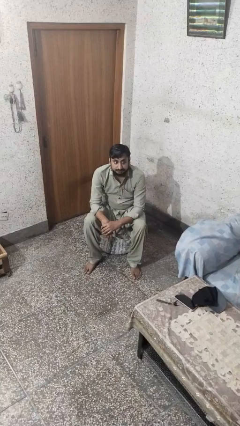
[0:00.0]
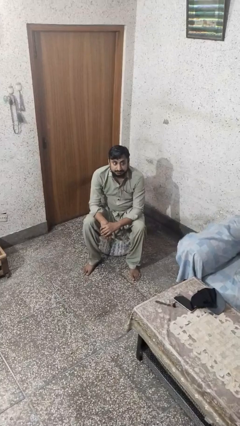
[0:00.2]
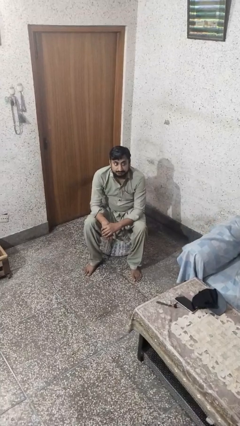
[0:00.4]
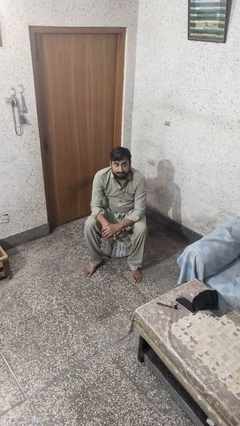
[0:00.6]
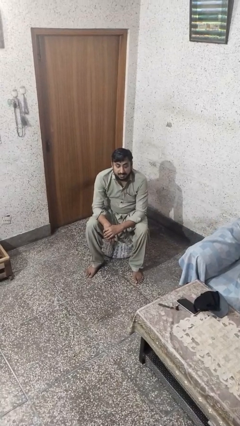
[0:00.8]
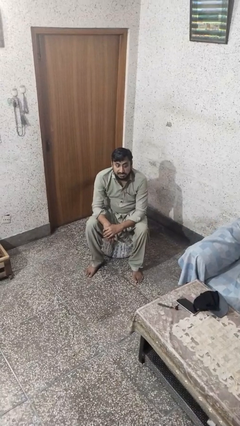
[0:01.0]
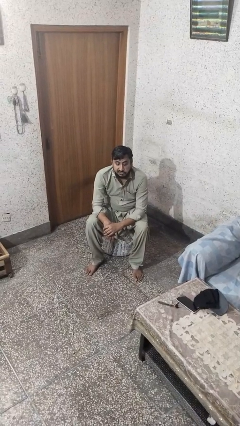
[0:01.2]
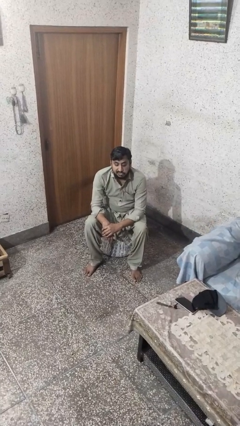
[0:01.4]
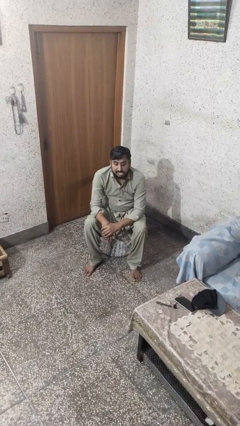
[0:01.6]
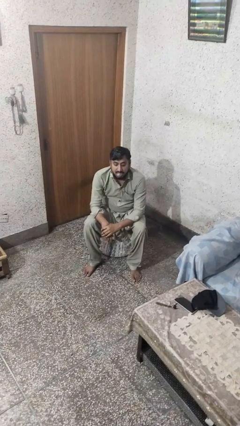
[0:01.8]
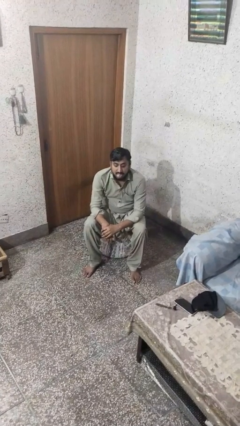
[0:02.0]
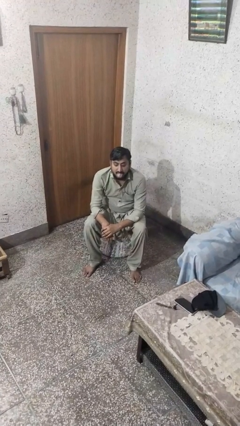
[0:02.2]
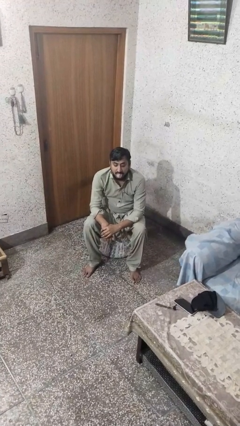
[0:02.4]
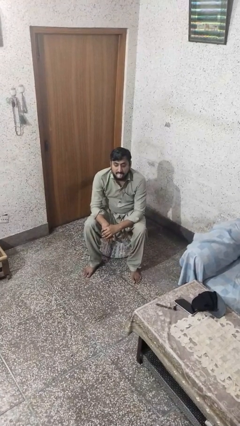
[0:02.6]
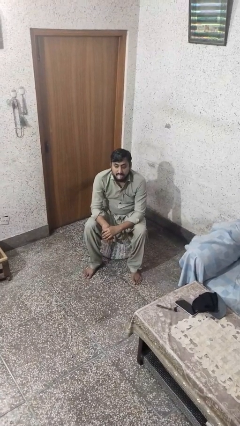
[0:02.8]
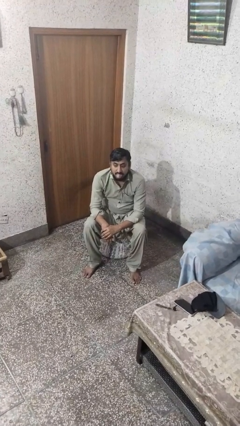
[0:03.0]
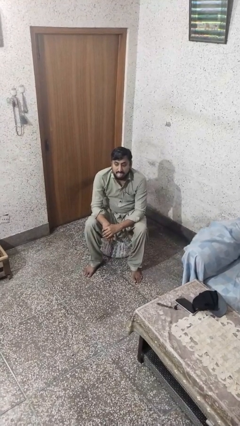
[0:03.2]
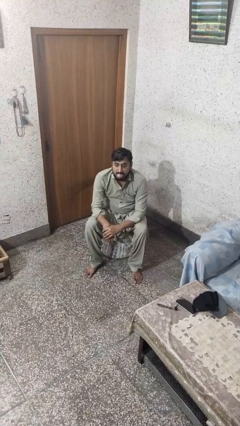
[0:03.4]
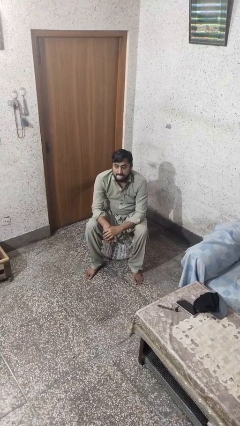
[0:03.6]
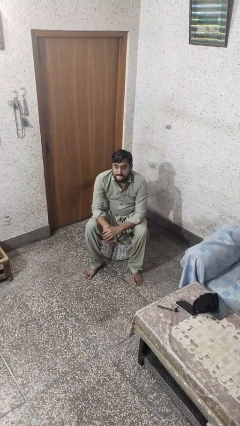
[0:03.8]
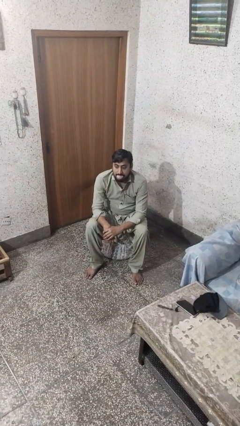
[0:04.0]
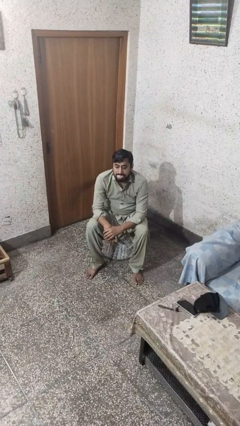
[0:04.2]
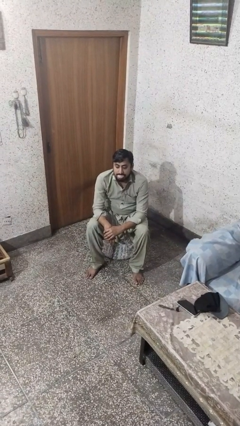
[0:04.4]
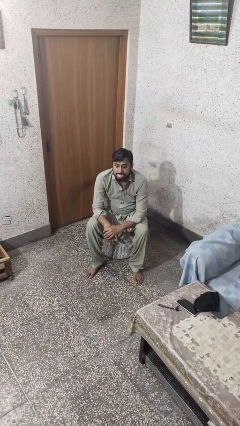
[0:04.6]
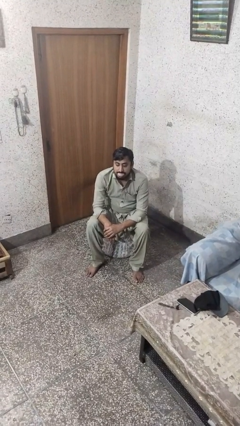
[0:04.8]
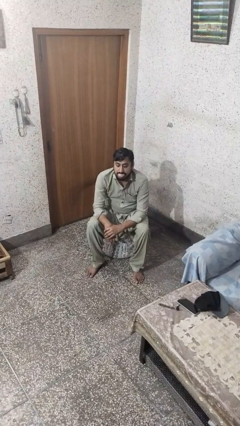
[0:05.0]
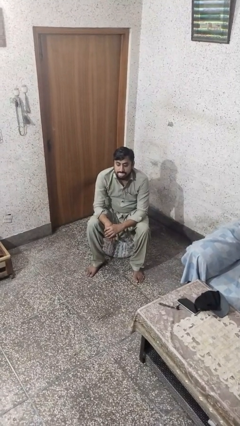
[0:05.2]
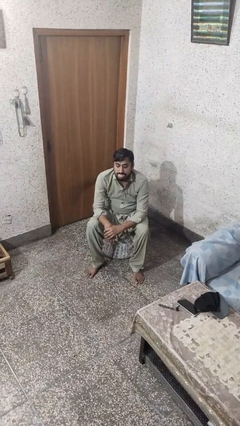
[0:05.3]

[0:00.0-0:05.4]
person sticks out tongue

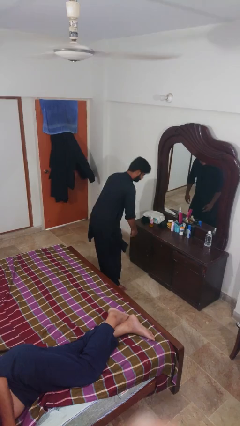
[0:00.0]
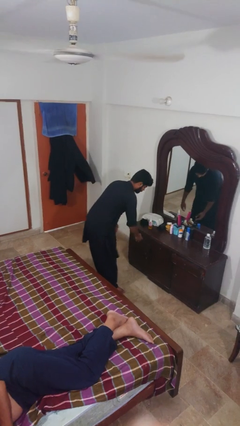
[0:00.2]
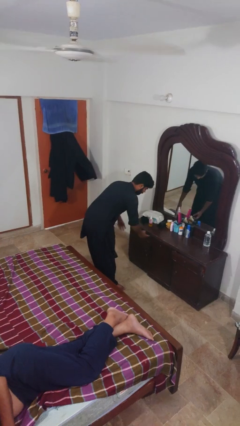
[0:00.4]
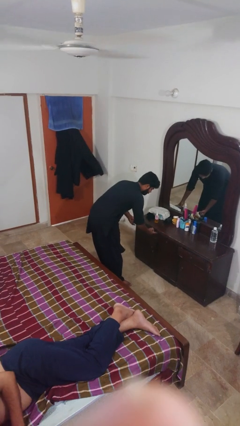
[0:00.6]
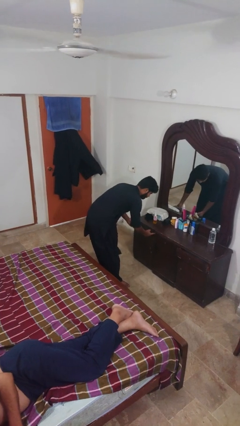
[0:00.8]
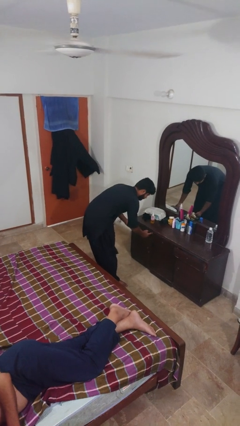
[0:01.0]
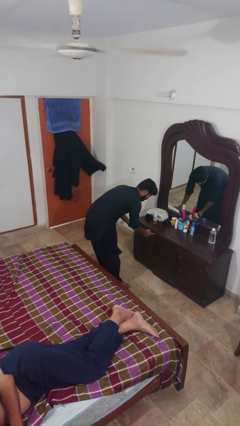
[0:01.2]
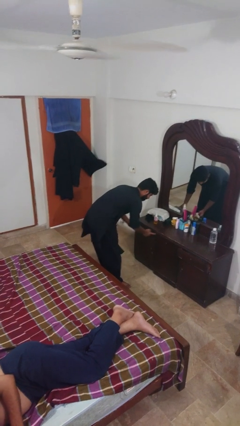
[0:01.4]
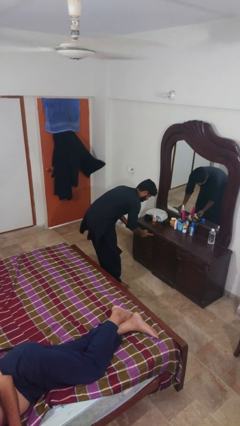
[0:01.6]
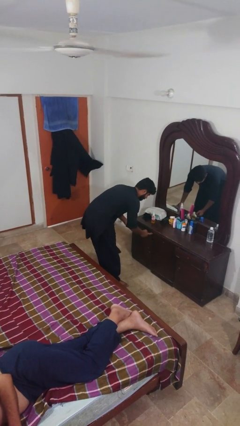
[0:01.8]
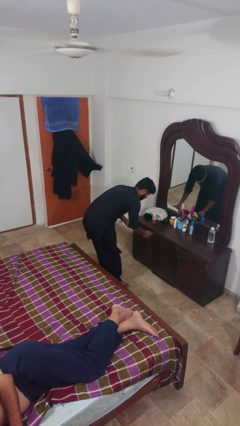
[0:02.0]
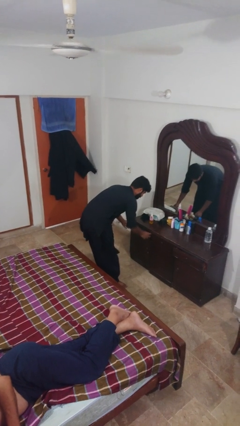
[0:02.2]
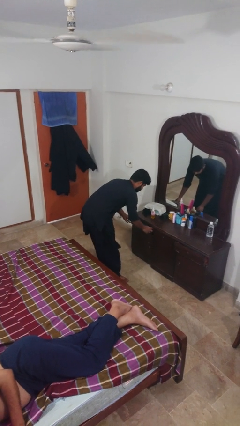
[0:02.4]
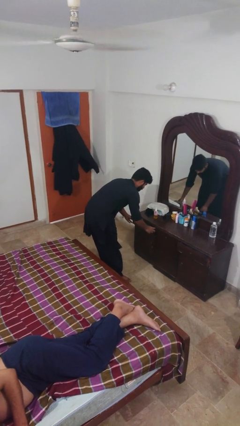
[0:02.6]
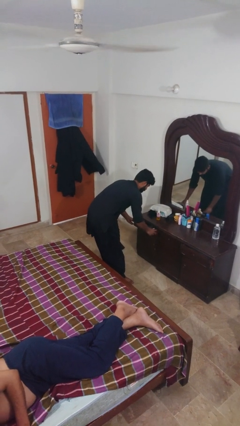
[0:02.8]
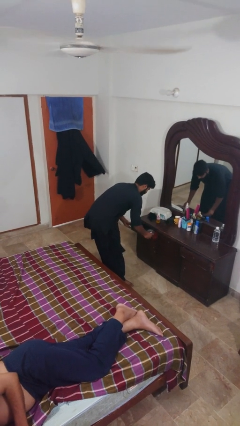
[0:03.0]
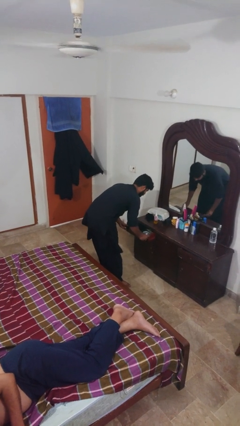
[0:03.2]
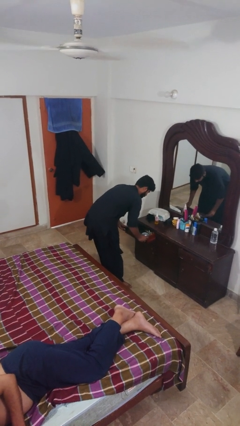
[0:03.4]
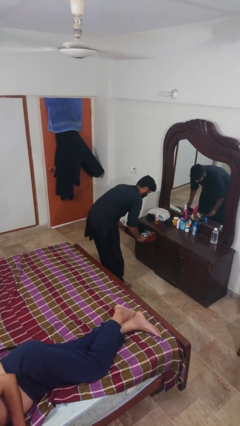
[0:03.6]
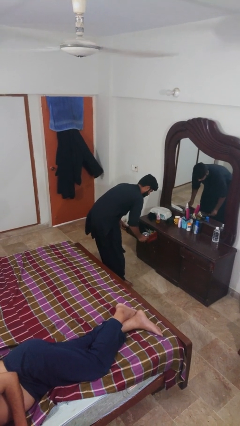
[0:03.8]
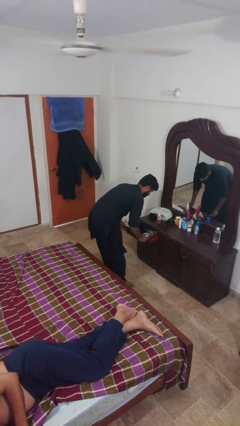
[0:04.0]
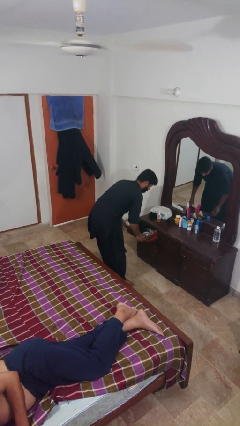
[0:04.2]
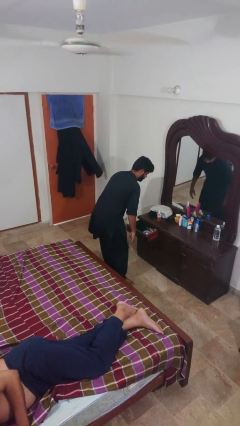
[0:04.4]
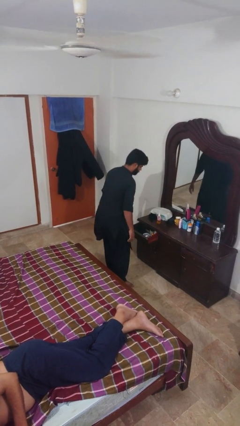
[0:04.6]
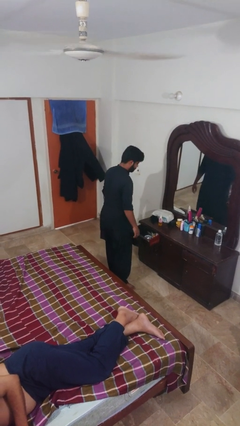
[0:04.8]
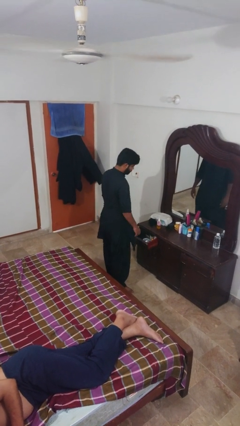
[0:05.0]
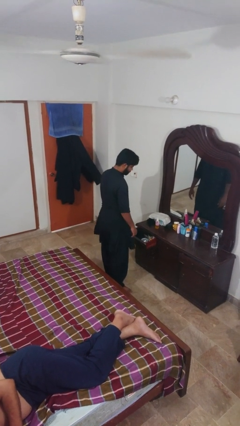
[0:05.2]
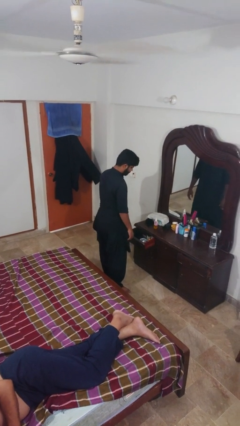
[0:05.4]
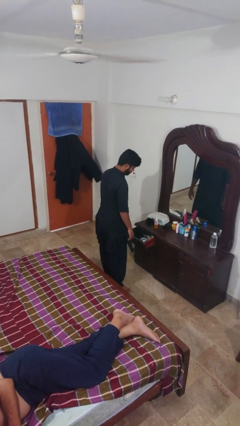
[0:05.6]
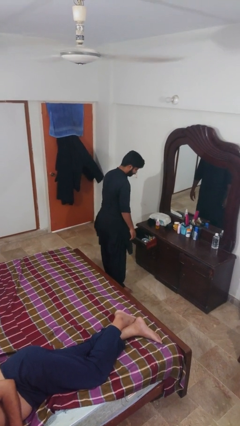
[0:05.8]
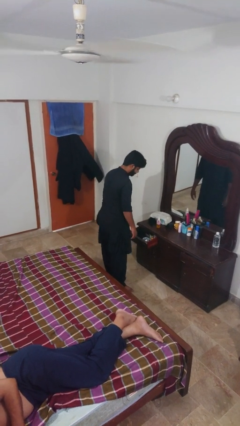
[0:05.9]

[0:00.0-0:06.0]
person opens dresser drawer

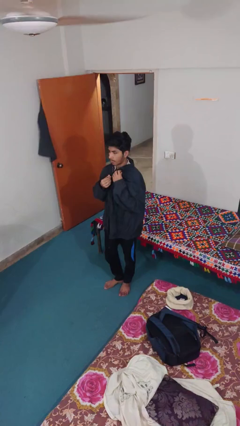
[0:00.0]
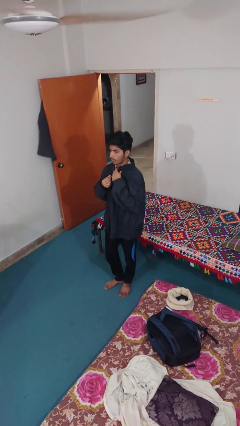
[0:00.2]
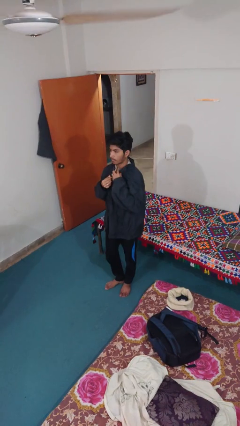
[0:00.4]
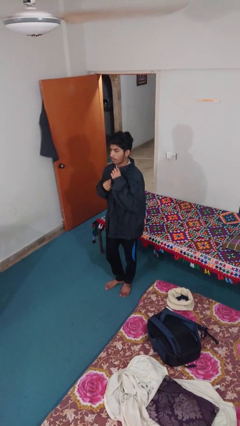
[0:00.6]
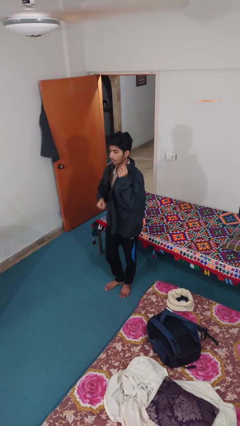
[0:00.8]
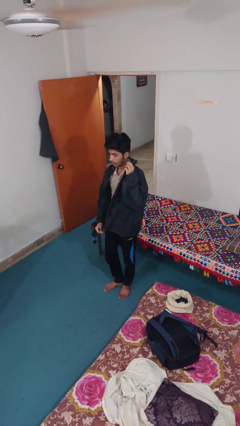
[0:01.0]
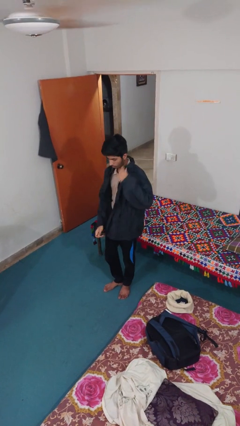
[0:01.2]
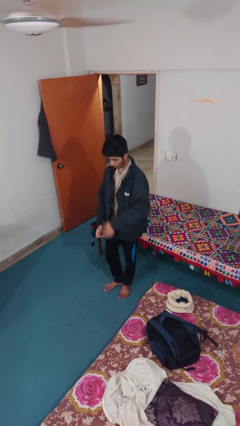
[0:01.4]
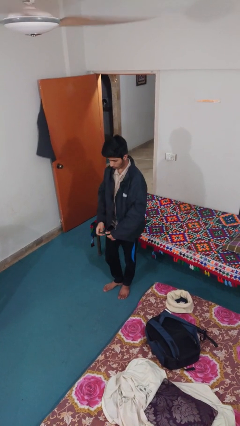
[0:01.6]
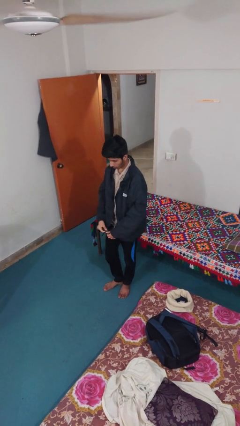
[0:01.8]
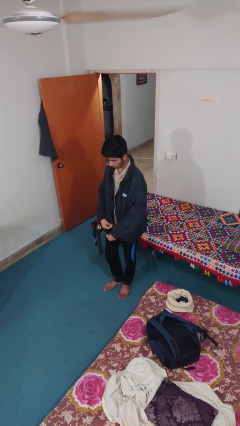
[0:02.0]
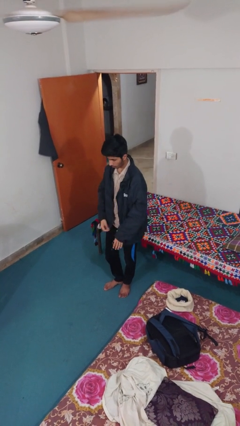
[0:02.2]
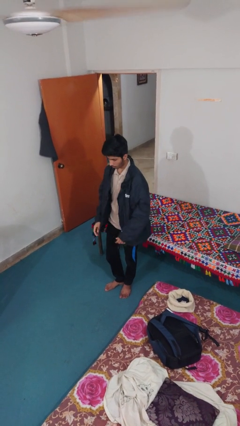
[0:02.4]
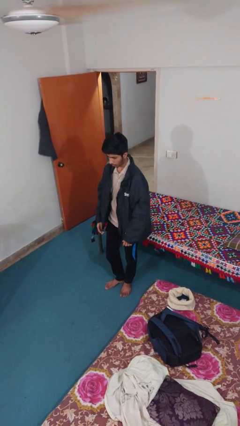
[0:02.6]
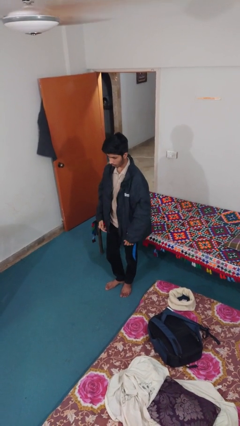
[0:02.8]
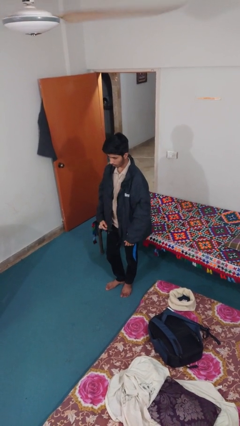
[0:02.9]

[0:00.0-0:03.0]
person unzips jacket

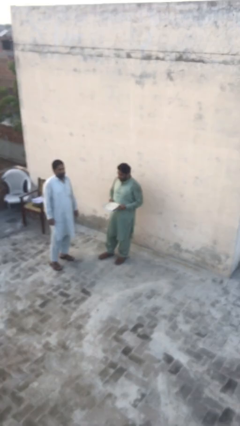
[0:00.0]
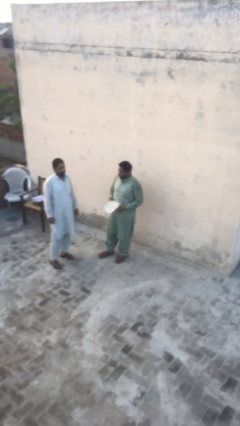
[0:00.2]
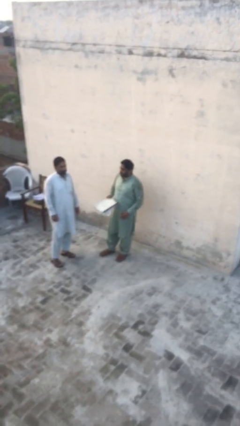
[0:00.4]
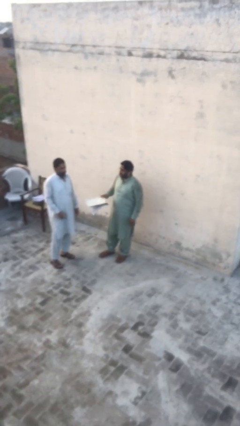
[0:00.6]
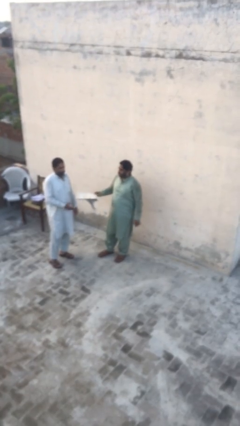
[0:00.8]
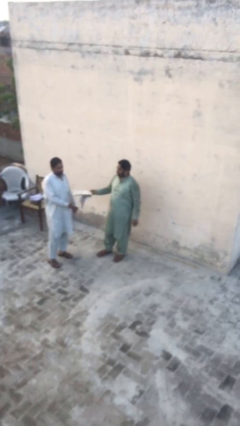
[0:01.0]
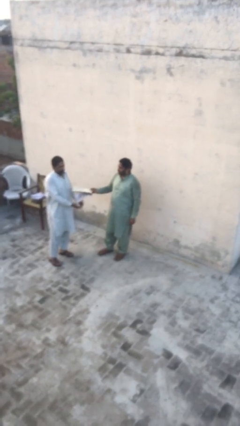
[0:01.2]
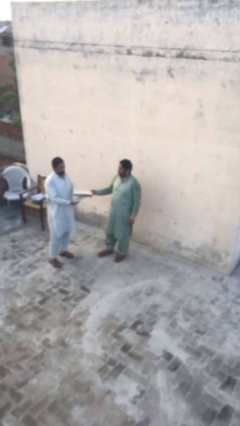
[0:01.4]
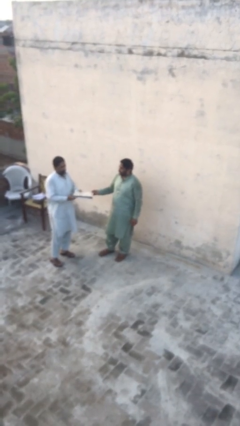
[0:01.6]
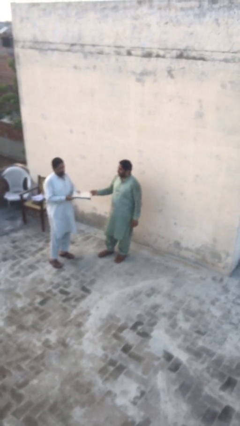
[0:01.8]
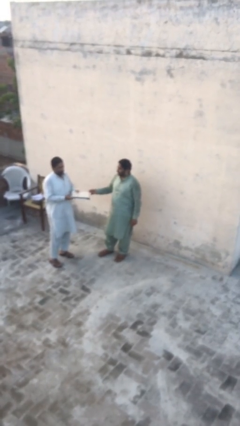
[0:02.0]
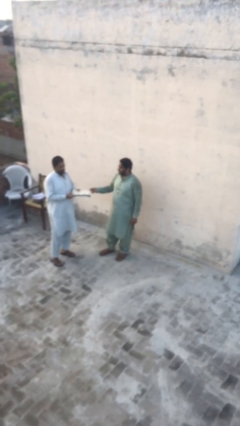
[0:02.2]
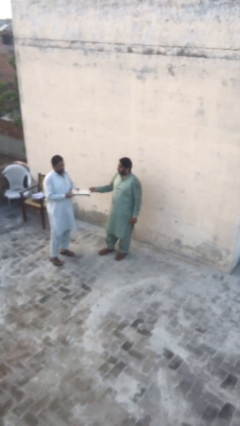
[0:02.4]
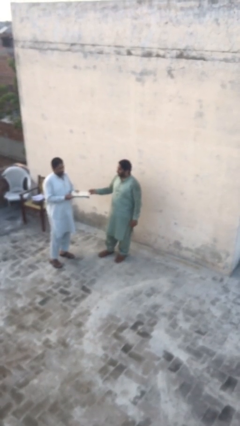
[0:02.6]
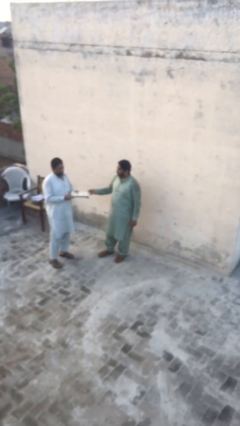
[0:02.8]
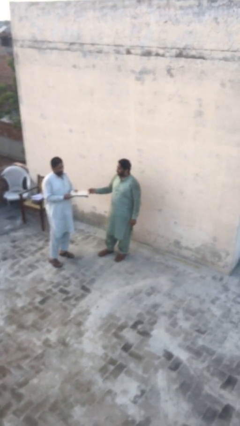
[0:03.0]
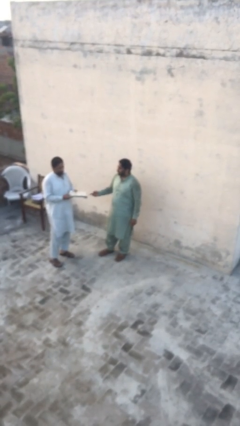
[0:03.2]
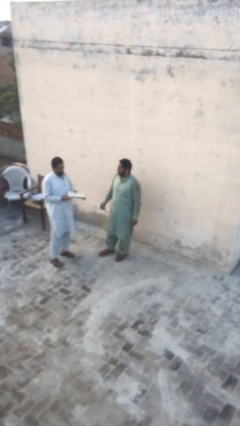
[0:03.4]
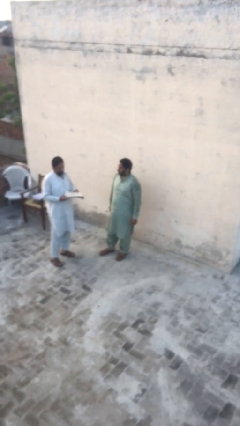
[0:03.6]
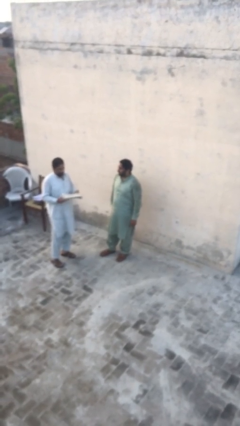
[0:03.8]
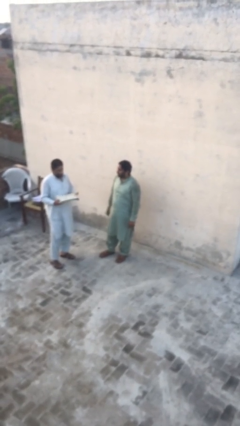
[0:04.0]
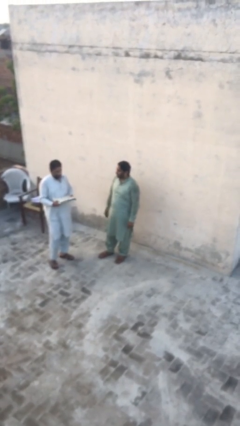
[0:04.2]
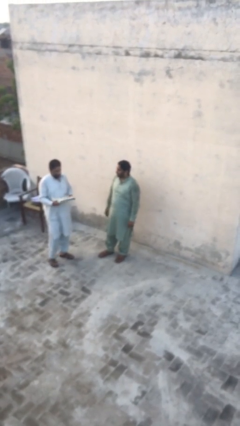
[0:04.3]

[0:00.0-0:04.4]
person transfers object to person
